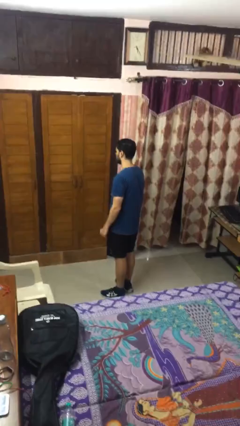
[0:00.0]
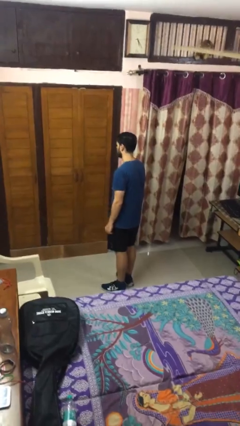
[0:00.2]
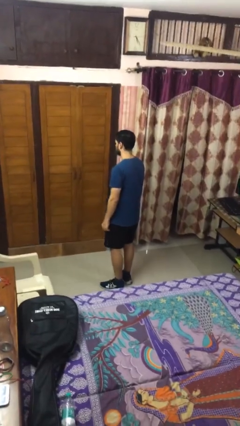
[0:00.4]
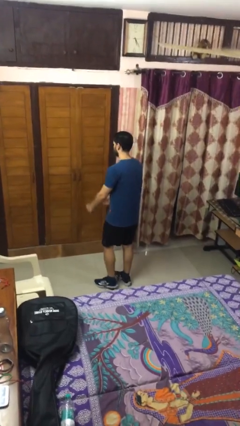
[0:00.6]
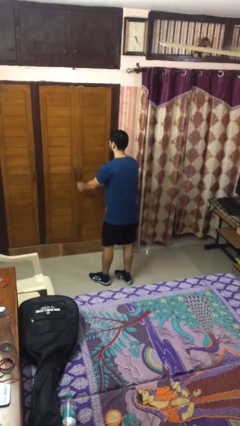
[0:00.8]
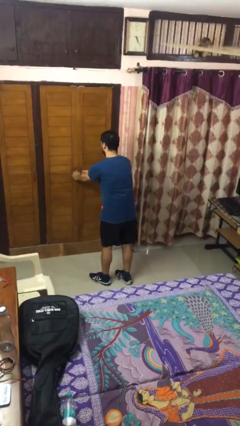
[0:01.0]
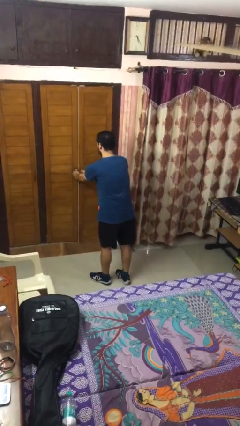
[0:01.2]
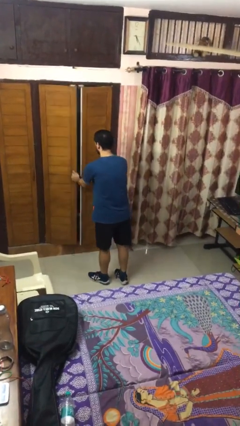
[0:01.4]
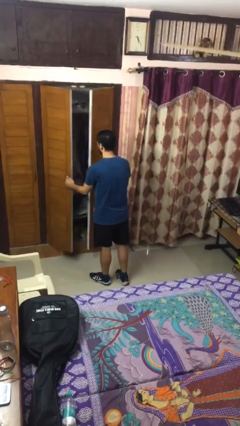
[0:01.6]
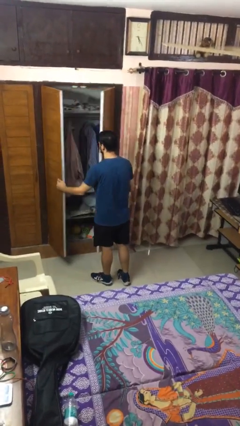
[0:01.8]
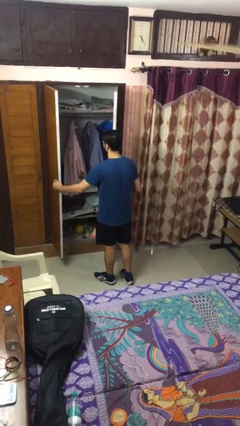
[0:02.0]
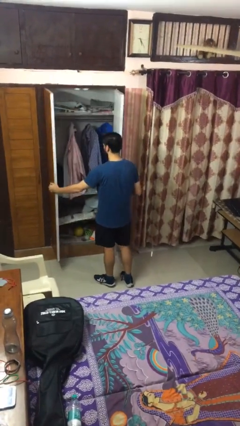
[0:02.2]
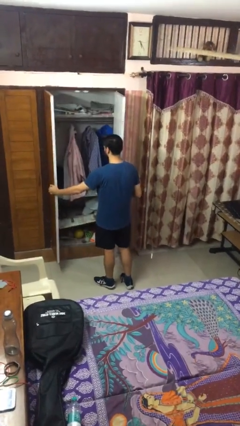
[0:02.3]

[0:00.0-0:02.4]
person opens closet door

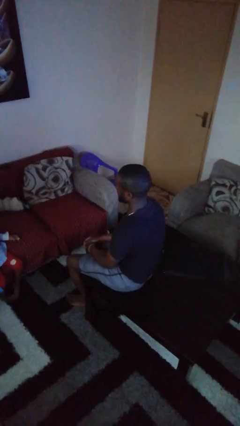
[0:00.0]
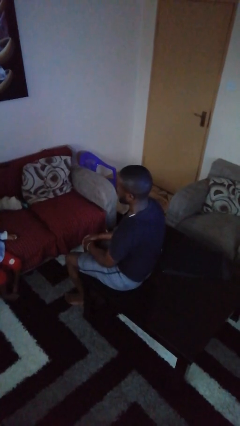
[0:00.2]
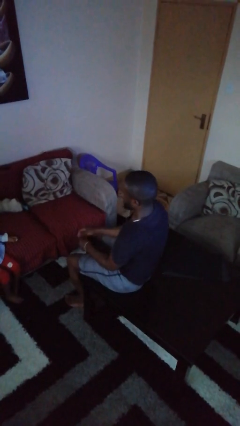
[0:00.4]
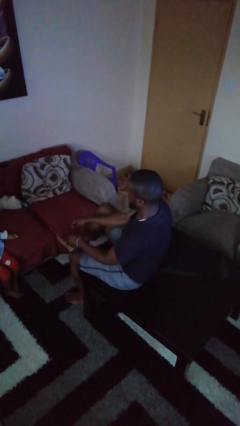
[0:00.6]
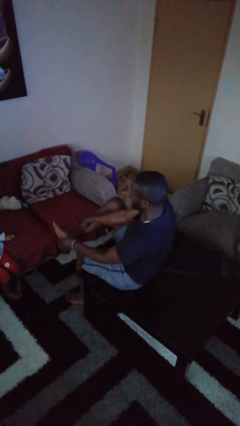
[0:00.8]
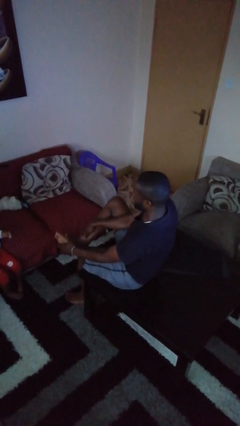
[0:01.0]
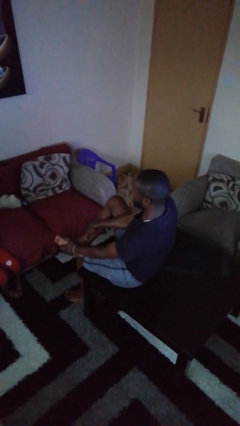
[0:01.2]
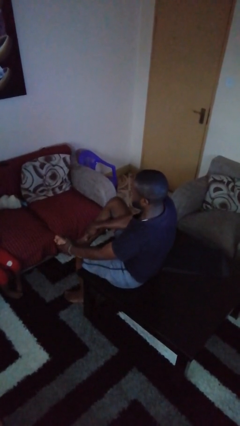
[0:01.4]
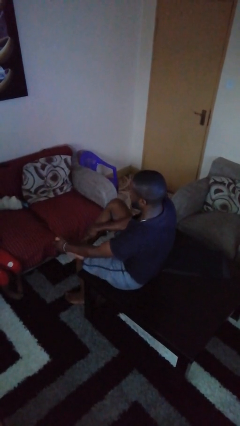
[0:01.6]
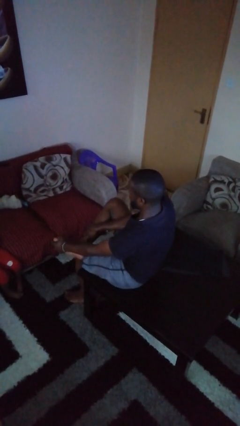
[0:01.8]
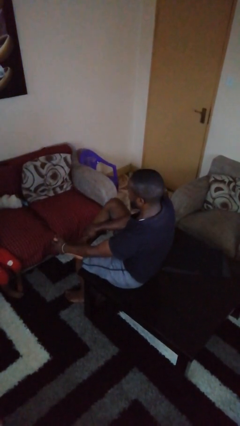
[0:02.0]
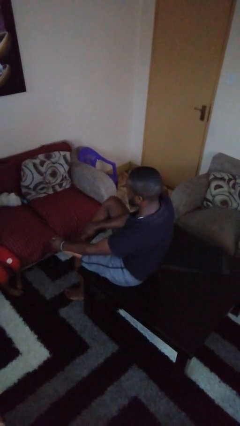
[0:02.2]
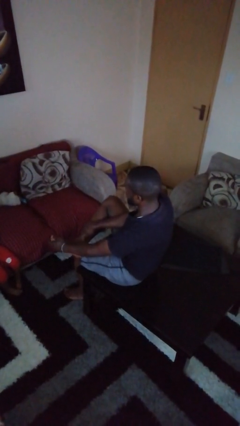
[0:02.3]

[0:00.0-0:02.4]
person rubs foot

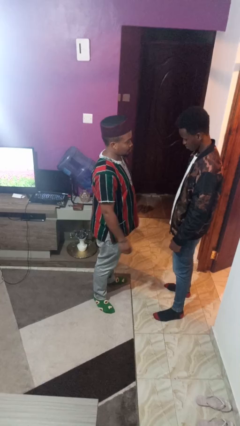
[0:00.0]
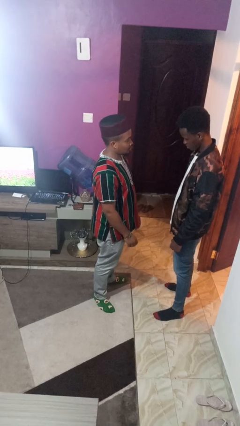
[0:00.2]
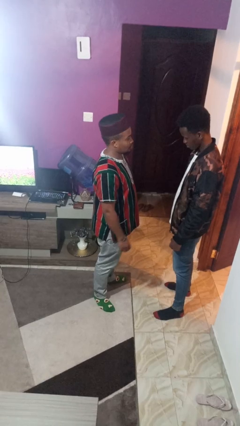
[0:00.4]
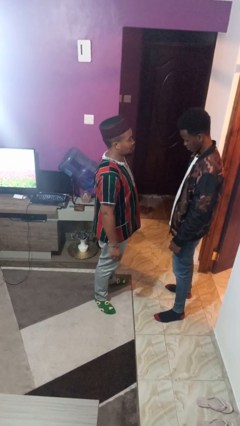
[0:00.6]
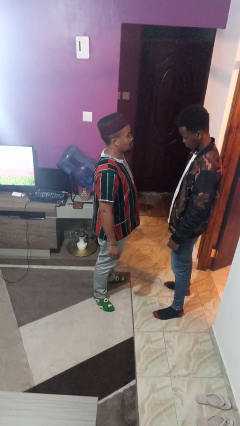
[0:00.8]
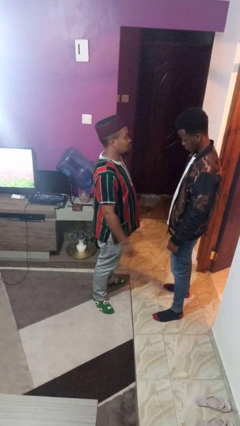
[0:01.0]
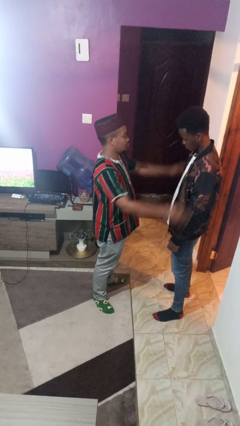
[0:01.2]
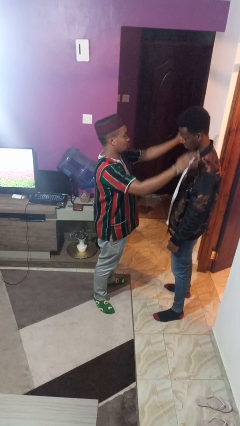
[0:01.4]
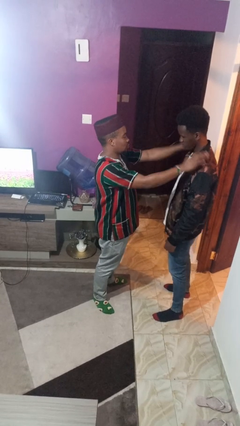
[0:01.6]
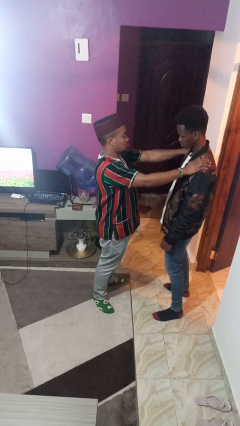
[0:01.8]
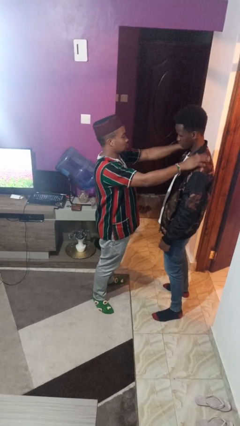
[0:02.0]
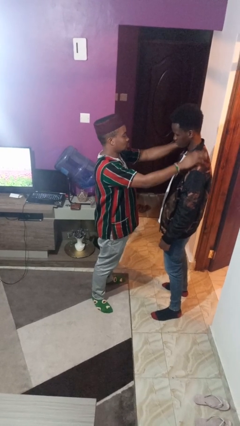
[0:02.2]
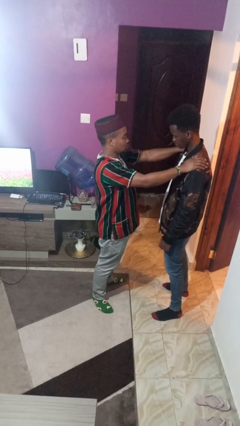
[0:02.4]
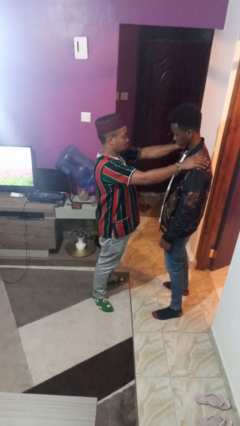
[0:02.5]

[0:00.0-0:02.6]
person closes door with foot

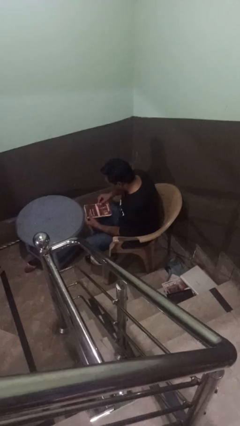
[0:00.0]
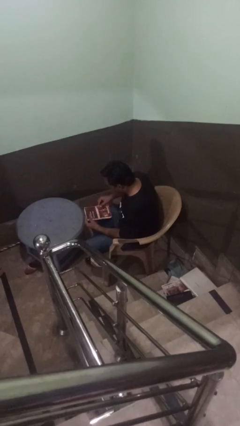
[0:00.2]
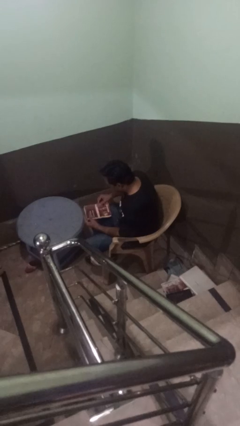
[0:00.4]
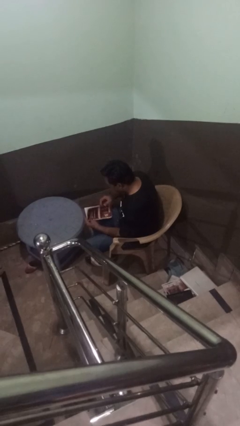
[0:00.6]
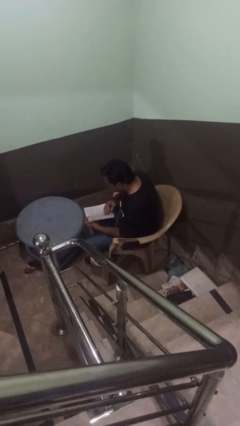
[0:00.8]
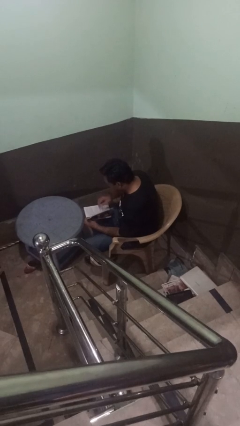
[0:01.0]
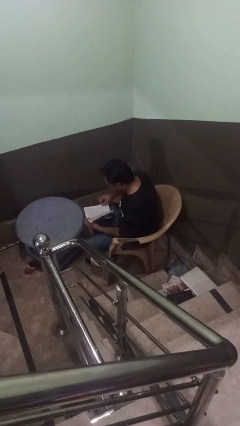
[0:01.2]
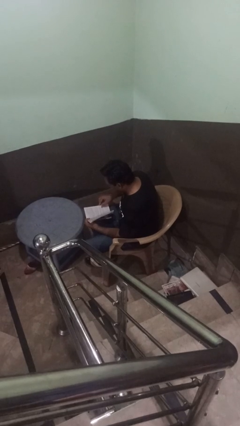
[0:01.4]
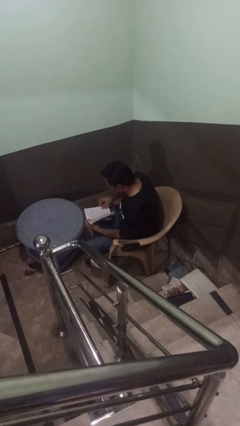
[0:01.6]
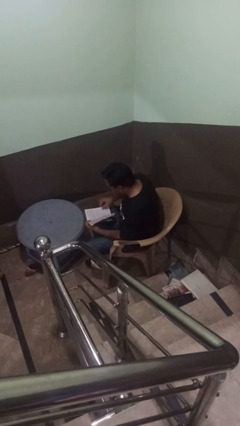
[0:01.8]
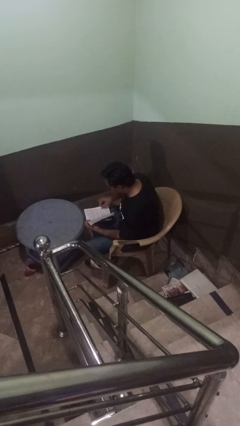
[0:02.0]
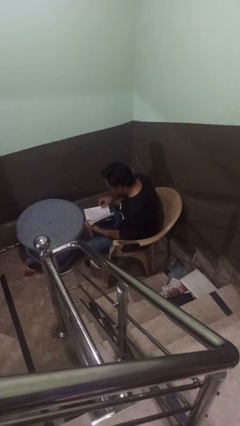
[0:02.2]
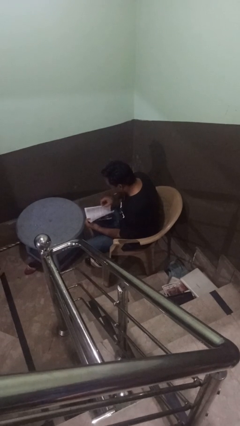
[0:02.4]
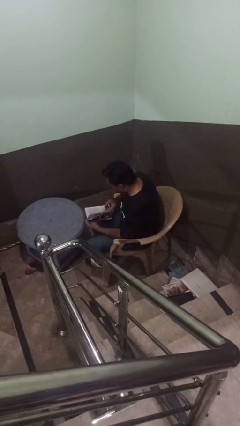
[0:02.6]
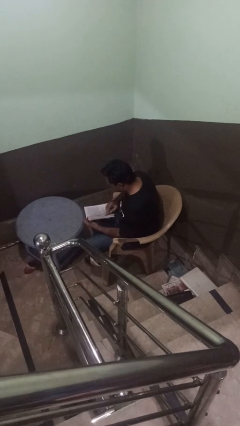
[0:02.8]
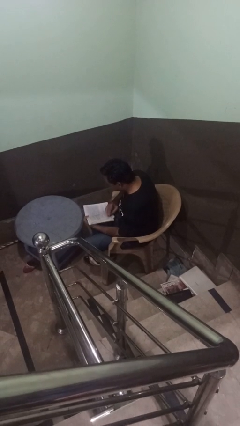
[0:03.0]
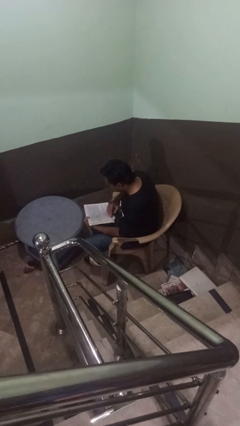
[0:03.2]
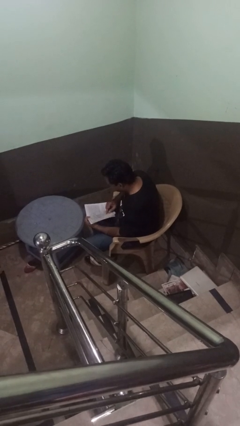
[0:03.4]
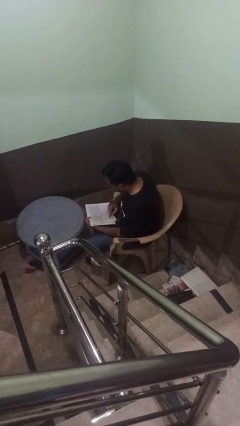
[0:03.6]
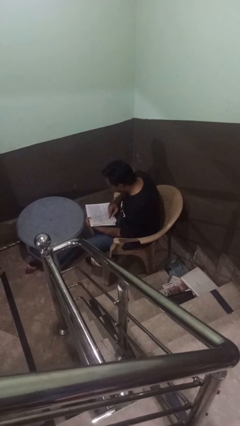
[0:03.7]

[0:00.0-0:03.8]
person reads book

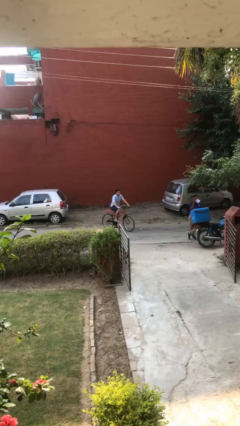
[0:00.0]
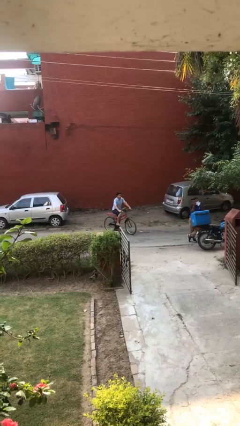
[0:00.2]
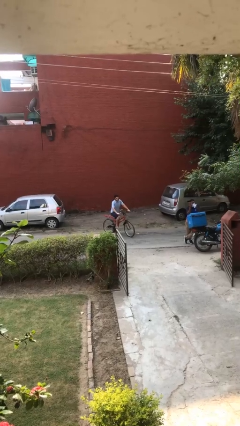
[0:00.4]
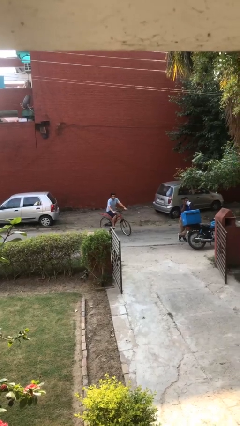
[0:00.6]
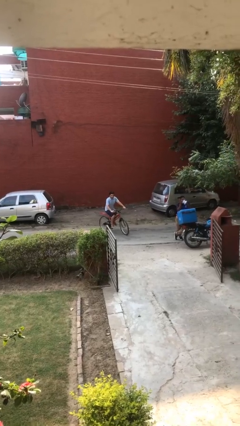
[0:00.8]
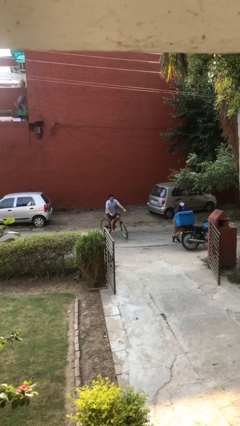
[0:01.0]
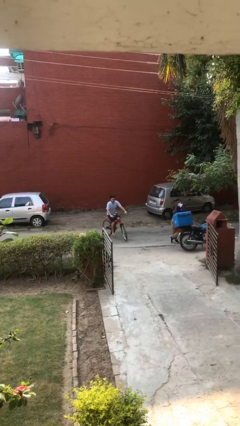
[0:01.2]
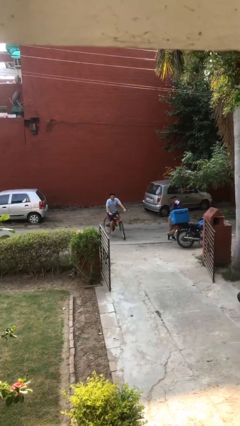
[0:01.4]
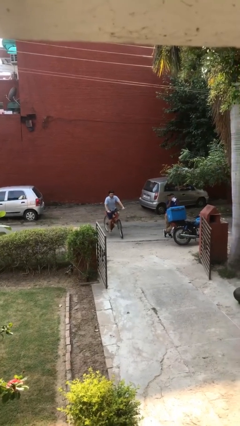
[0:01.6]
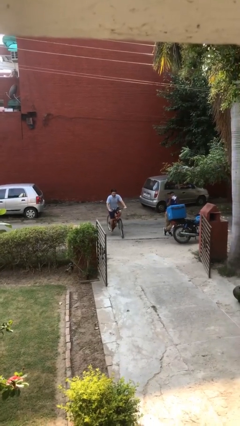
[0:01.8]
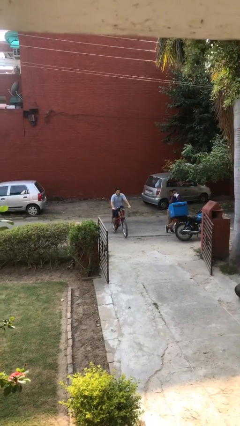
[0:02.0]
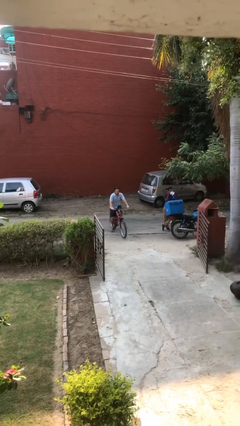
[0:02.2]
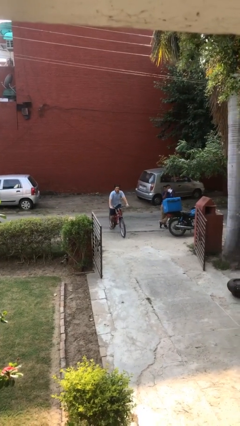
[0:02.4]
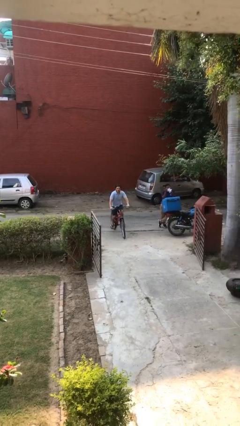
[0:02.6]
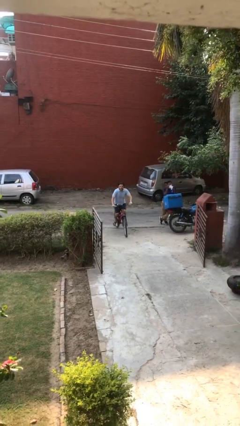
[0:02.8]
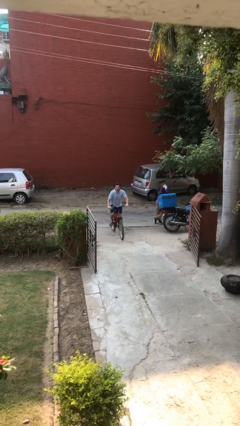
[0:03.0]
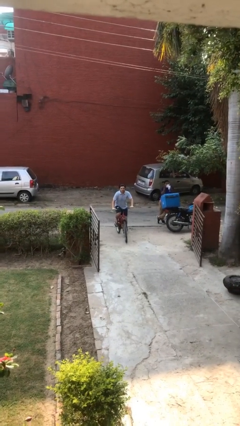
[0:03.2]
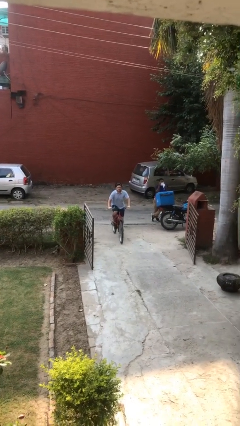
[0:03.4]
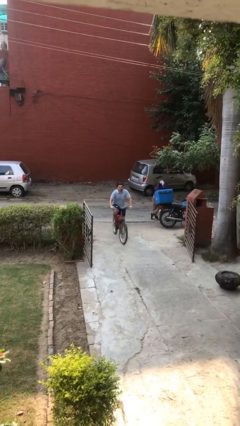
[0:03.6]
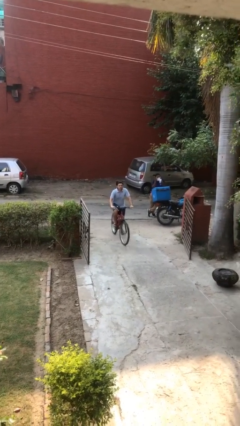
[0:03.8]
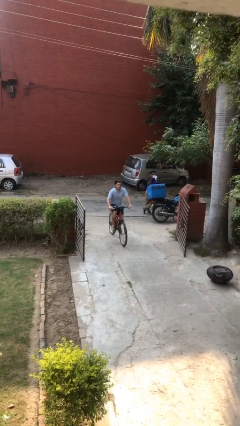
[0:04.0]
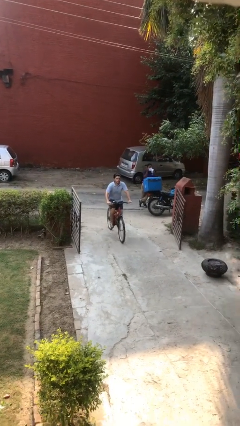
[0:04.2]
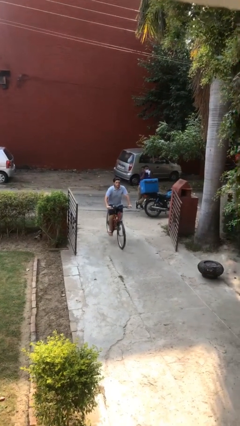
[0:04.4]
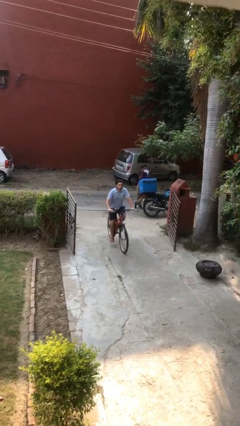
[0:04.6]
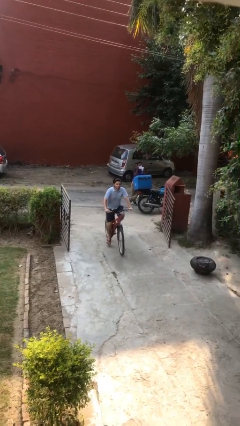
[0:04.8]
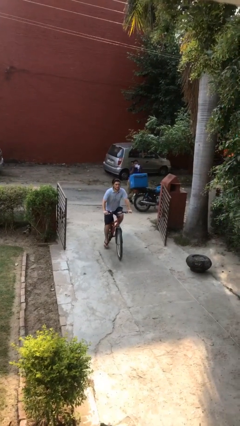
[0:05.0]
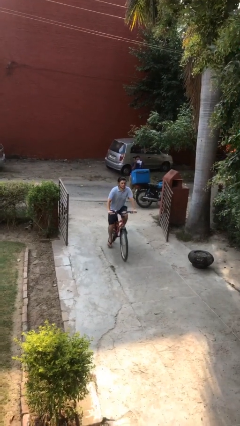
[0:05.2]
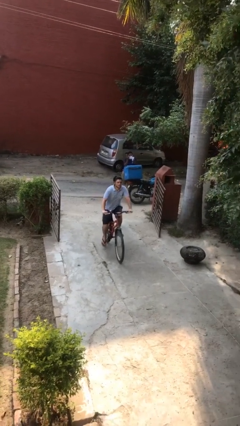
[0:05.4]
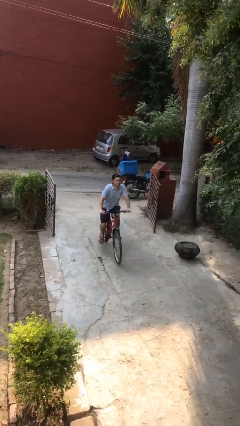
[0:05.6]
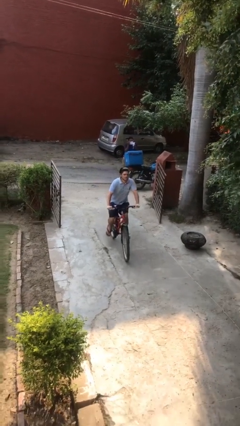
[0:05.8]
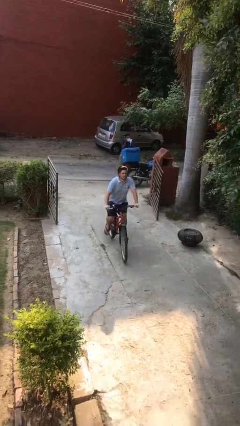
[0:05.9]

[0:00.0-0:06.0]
person rides bicycle

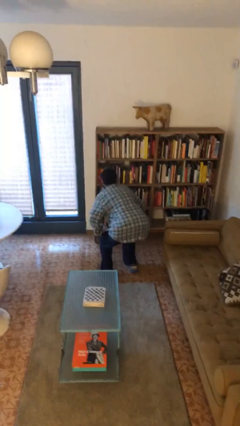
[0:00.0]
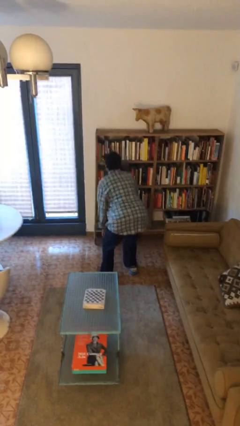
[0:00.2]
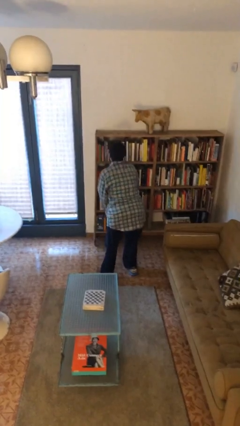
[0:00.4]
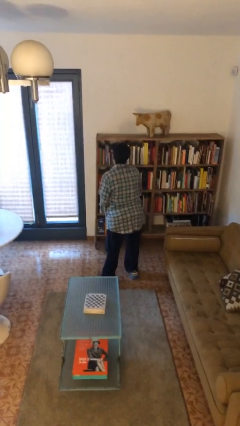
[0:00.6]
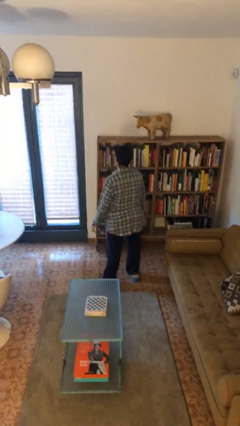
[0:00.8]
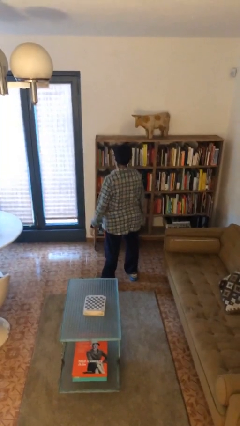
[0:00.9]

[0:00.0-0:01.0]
person stands up
